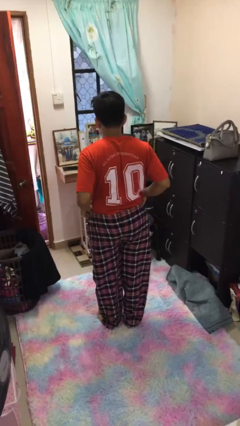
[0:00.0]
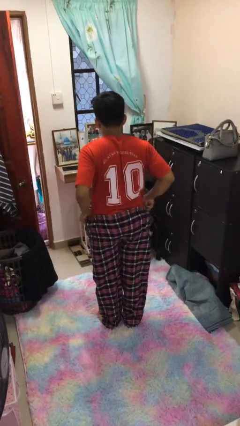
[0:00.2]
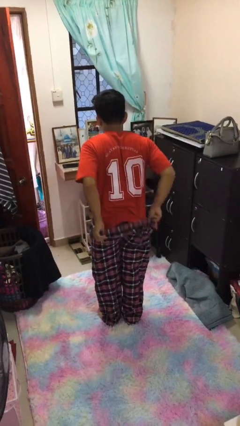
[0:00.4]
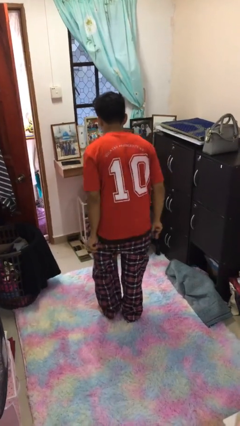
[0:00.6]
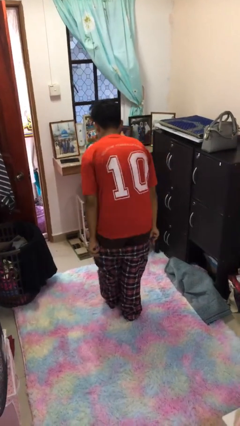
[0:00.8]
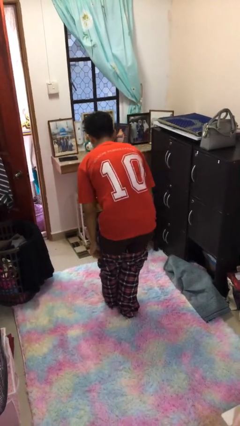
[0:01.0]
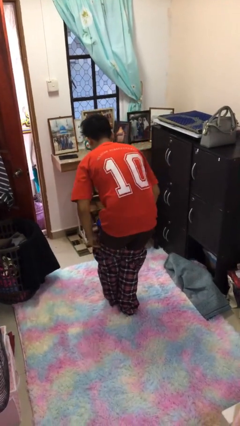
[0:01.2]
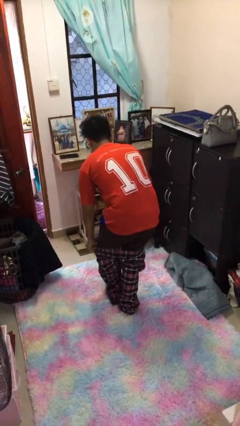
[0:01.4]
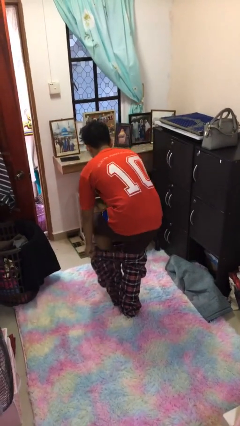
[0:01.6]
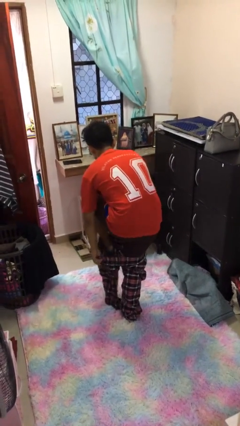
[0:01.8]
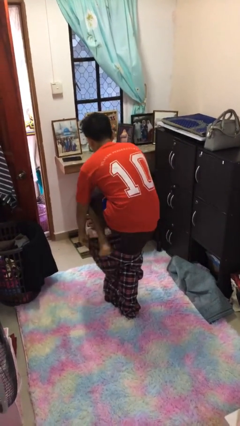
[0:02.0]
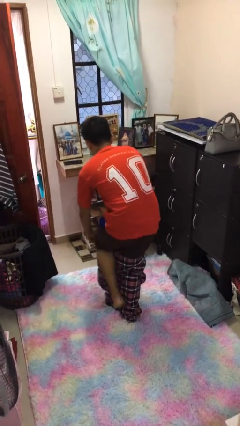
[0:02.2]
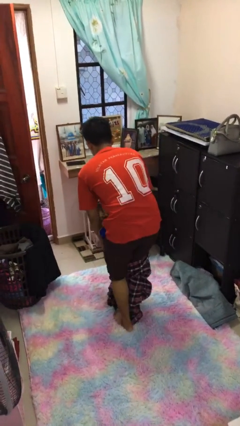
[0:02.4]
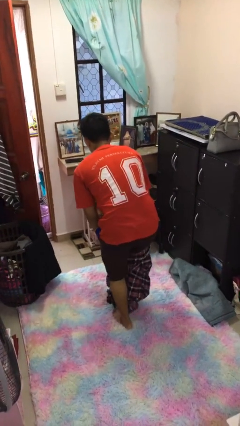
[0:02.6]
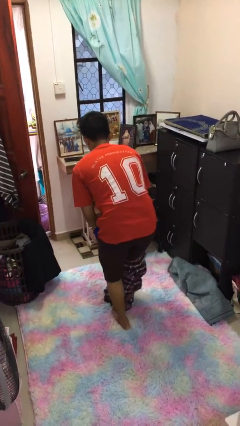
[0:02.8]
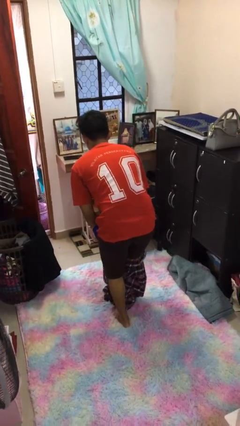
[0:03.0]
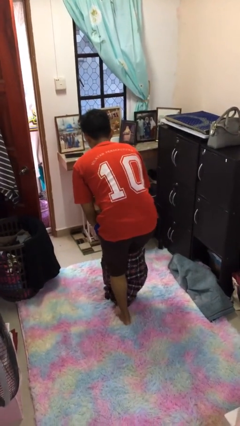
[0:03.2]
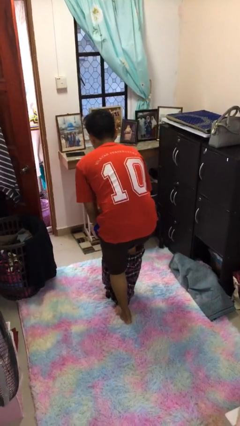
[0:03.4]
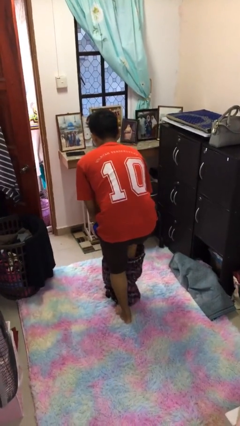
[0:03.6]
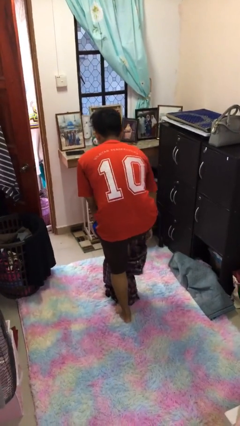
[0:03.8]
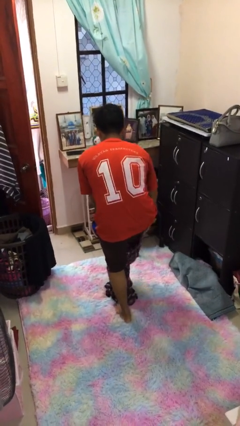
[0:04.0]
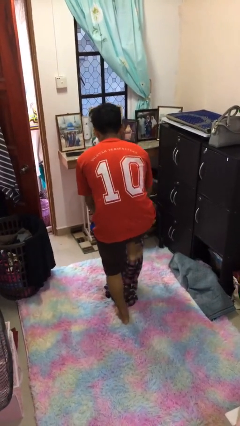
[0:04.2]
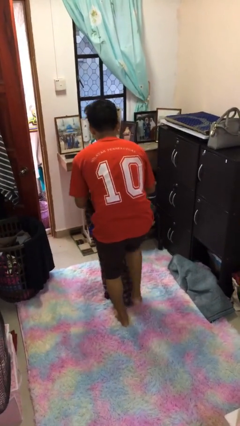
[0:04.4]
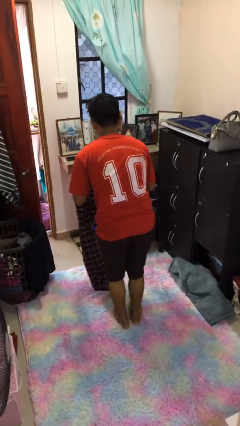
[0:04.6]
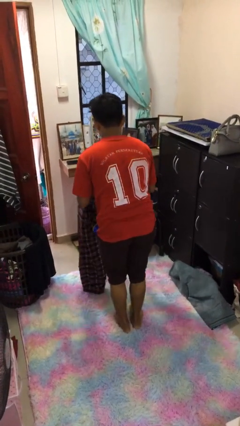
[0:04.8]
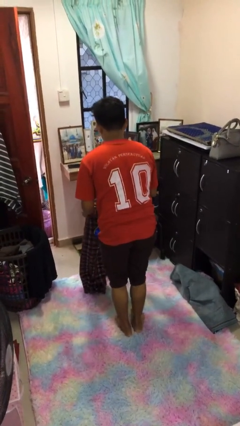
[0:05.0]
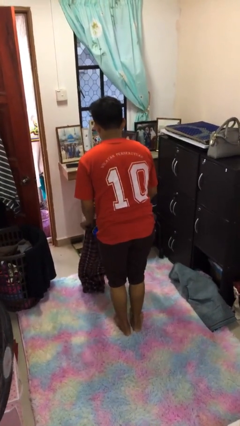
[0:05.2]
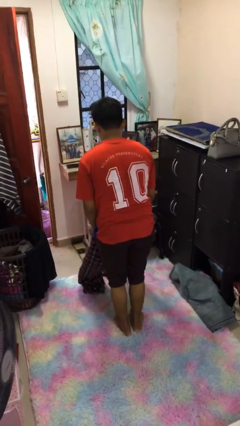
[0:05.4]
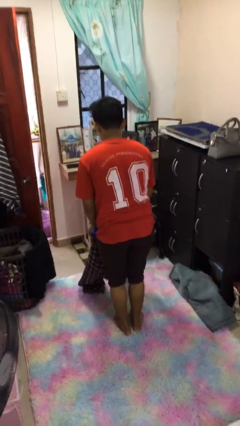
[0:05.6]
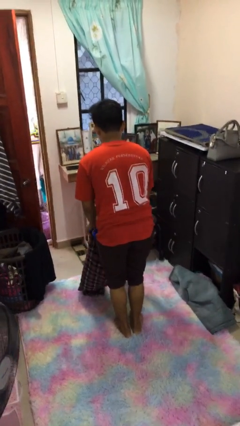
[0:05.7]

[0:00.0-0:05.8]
person takes off pants

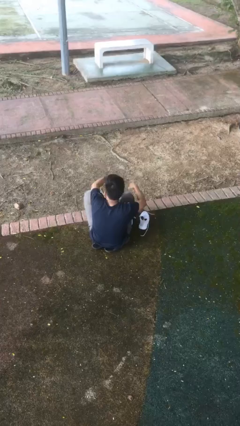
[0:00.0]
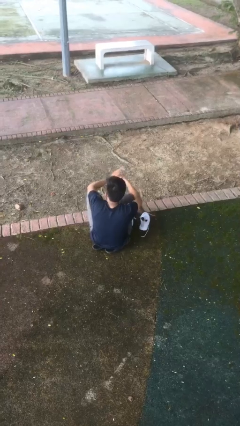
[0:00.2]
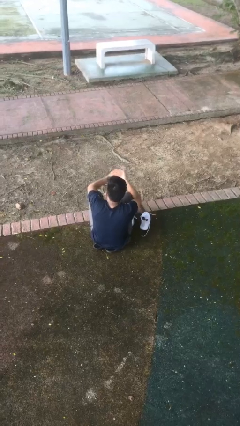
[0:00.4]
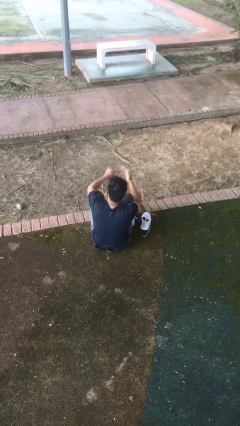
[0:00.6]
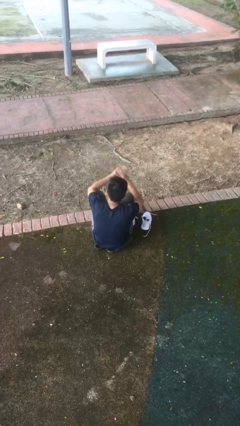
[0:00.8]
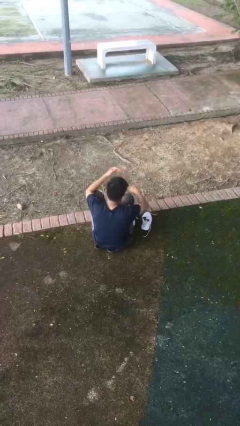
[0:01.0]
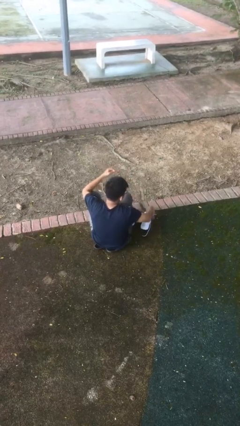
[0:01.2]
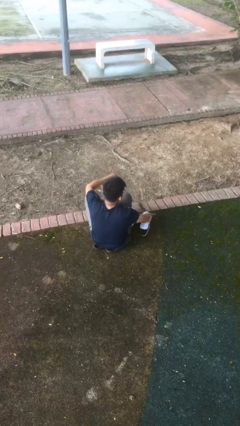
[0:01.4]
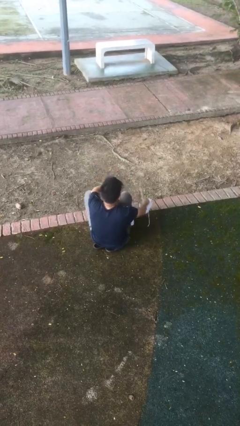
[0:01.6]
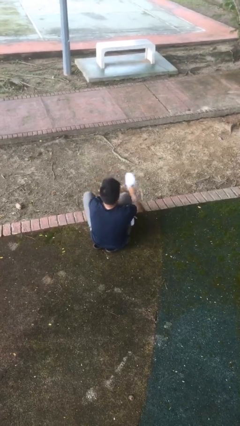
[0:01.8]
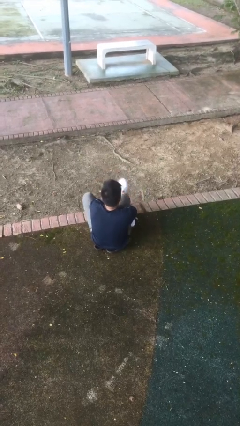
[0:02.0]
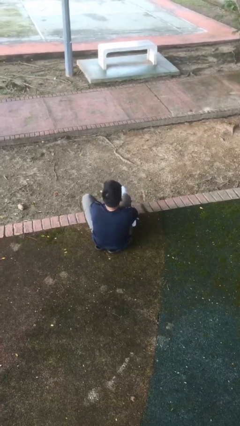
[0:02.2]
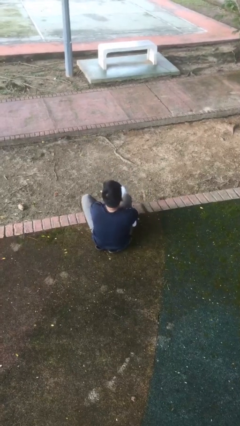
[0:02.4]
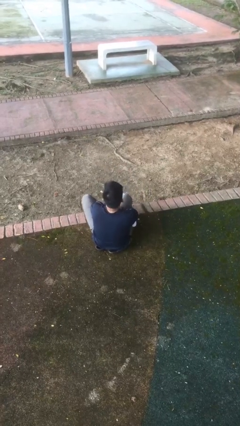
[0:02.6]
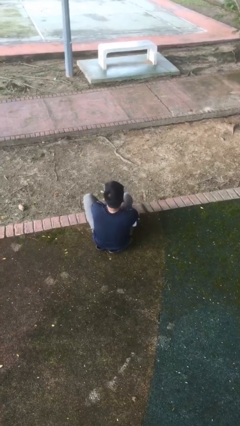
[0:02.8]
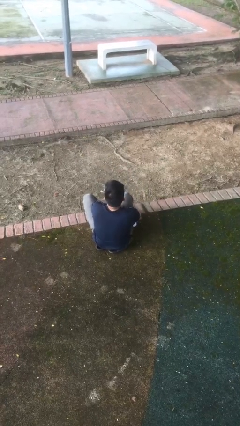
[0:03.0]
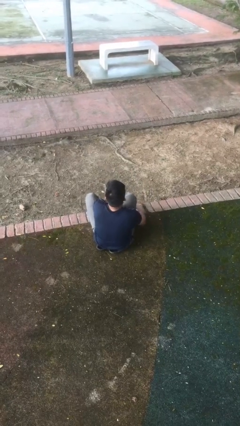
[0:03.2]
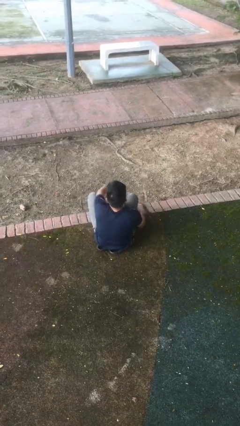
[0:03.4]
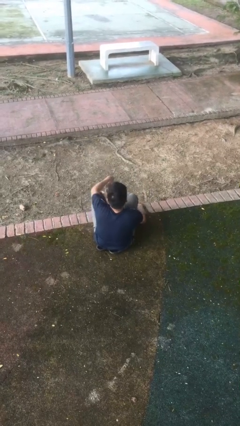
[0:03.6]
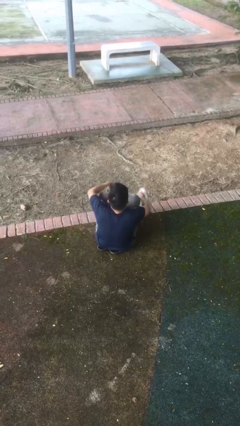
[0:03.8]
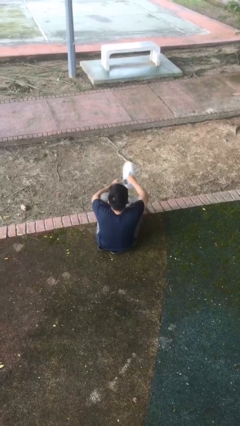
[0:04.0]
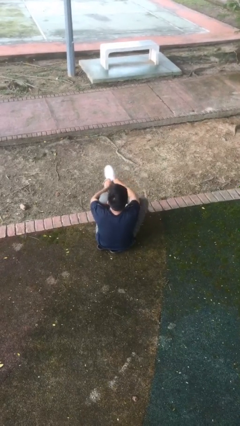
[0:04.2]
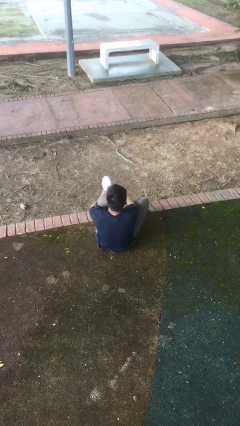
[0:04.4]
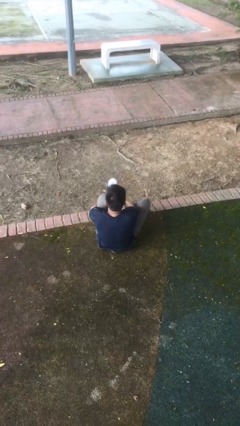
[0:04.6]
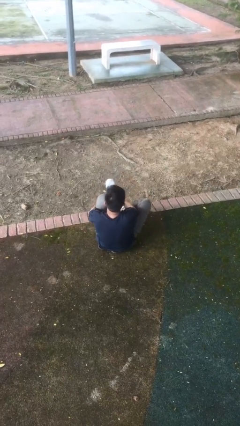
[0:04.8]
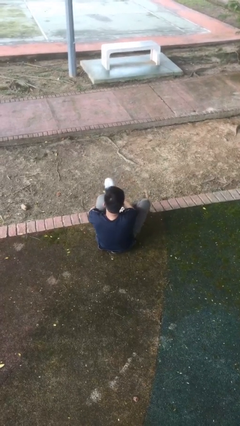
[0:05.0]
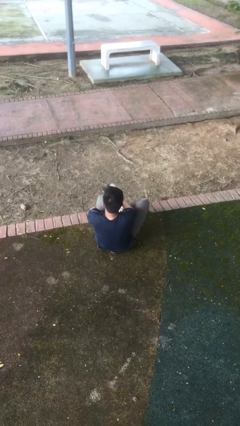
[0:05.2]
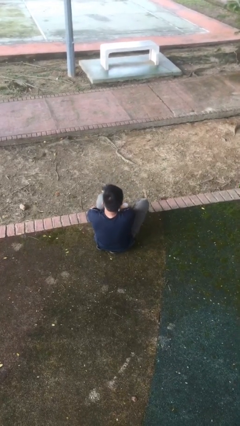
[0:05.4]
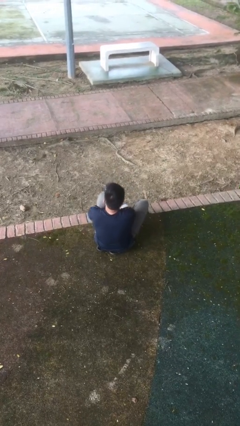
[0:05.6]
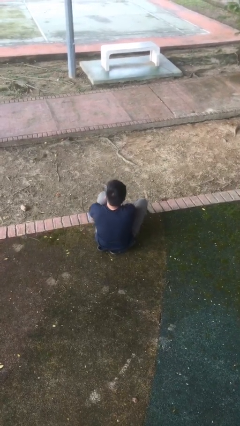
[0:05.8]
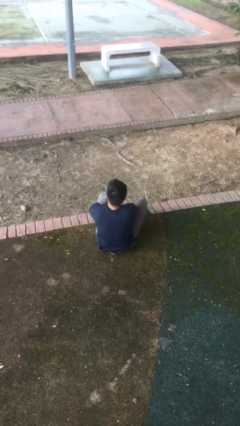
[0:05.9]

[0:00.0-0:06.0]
person puts on shoes

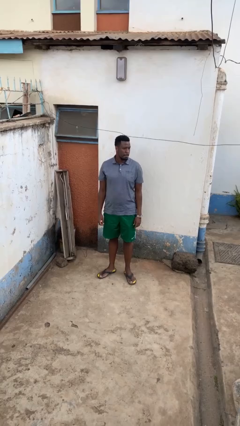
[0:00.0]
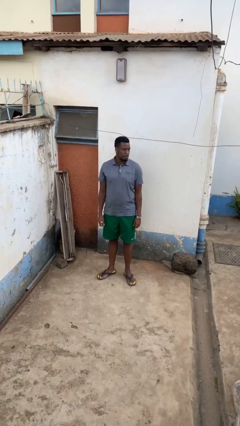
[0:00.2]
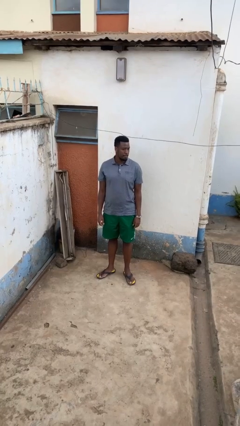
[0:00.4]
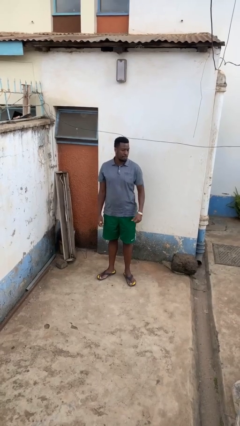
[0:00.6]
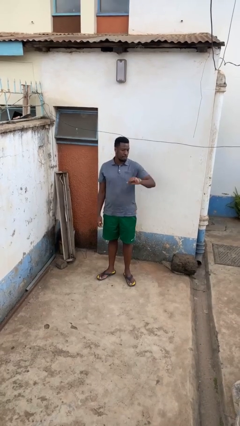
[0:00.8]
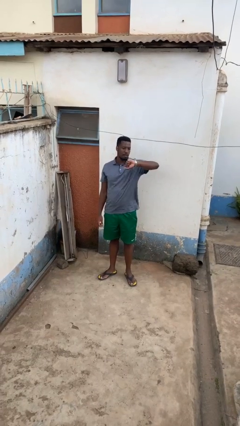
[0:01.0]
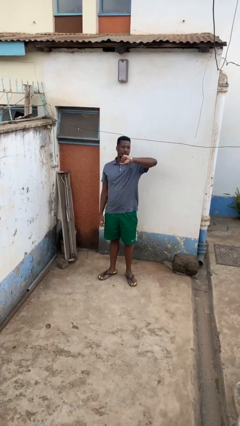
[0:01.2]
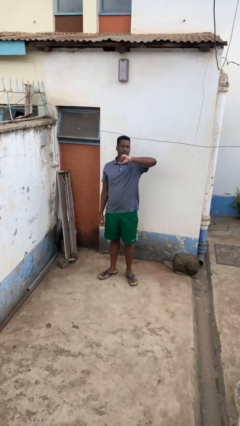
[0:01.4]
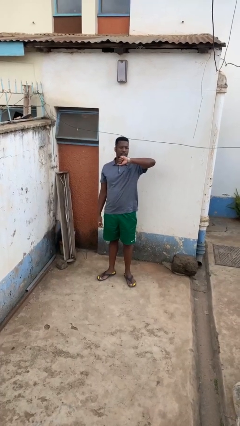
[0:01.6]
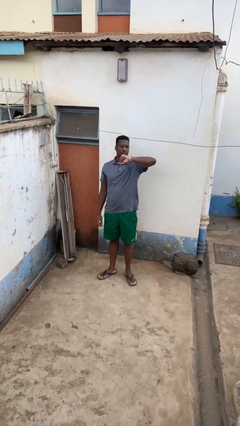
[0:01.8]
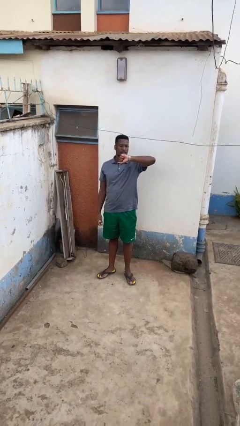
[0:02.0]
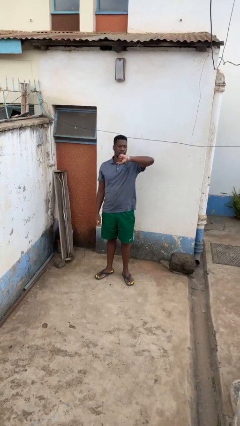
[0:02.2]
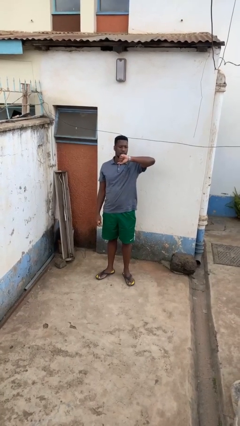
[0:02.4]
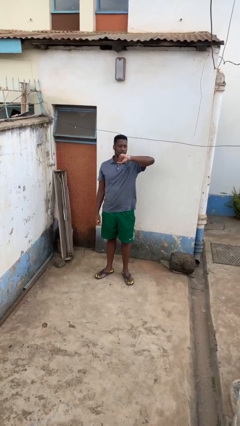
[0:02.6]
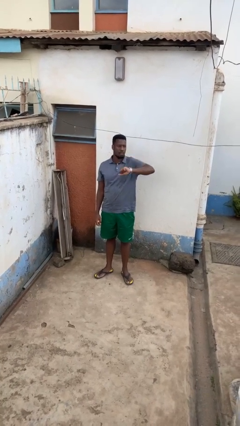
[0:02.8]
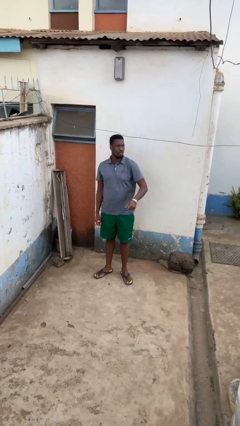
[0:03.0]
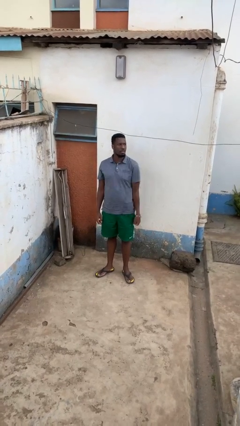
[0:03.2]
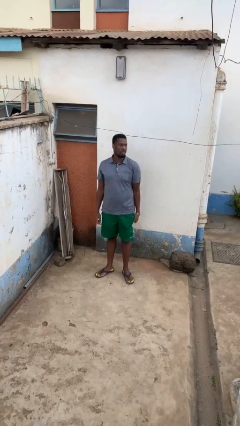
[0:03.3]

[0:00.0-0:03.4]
person looks at wristwatch

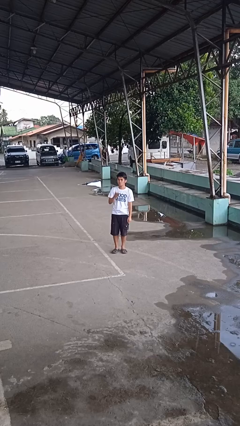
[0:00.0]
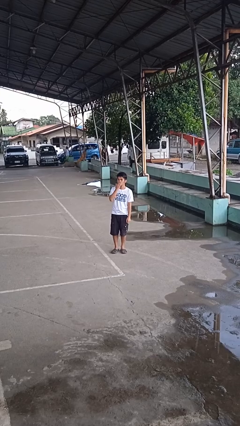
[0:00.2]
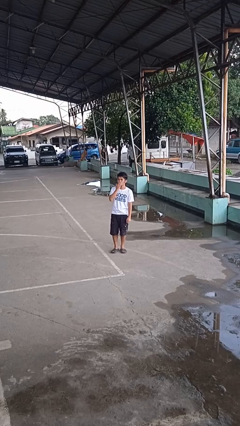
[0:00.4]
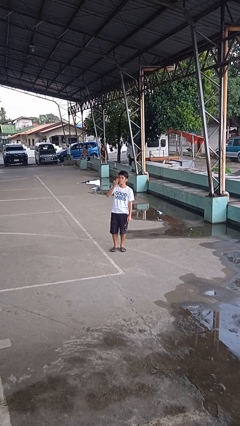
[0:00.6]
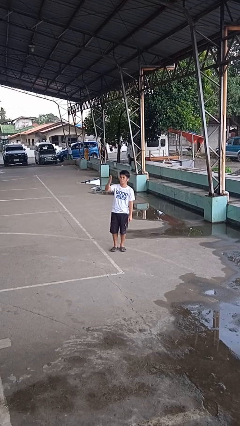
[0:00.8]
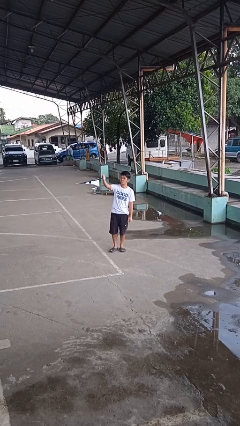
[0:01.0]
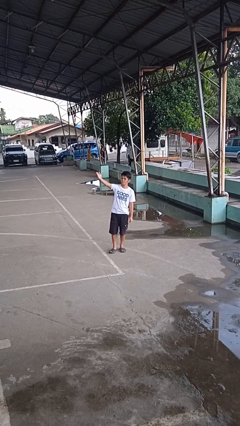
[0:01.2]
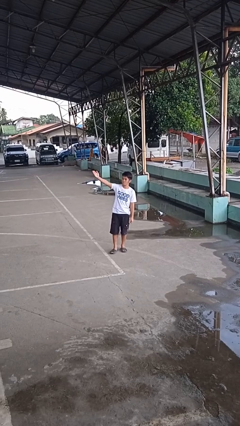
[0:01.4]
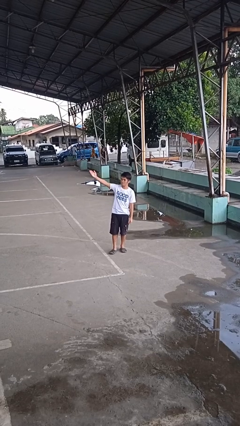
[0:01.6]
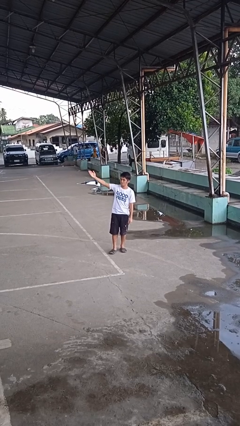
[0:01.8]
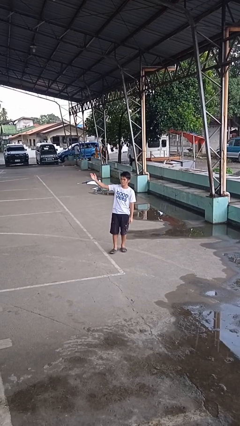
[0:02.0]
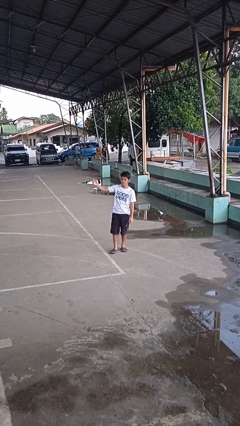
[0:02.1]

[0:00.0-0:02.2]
person gestures blow kiss
